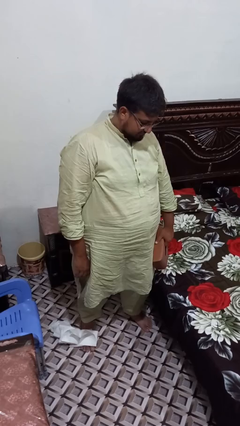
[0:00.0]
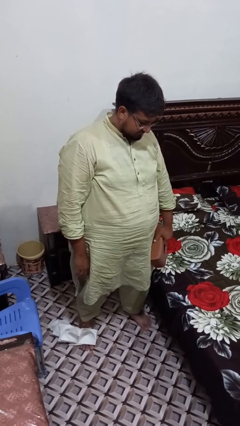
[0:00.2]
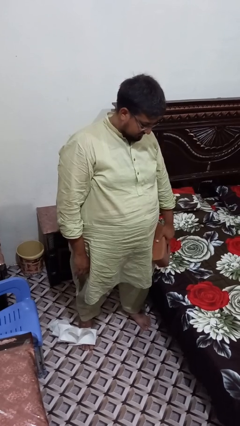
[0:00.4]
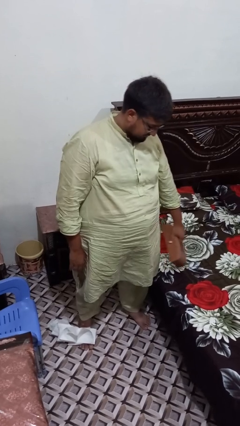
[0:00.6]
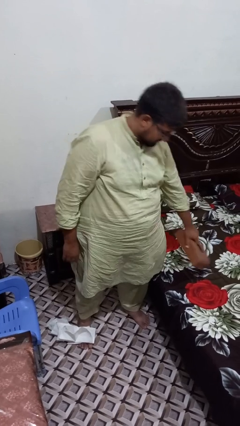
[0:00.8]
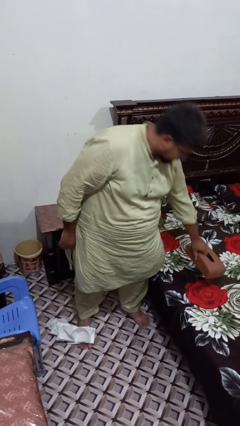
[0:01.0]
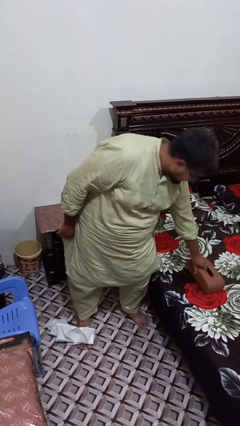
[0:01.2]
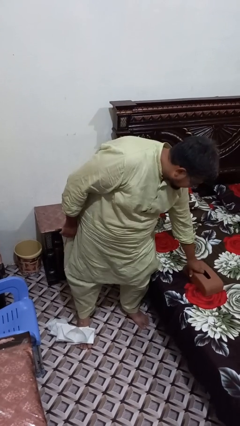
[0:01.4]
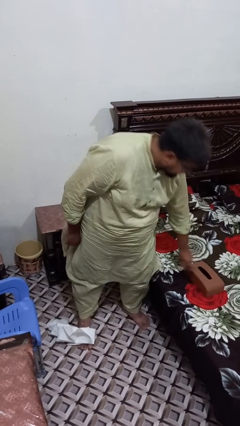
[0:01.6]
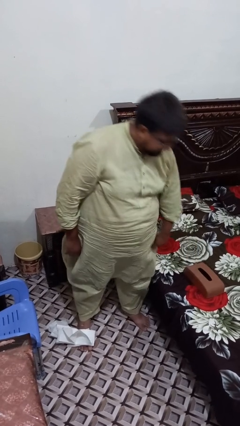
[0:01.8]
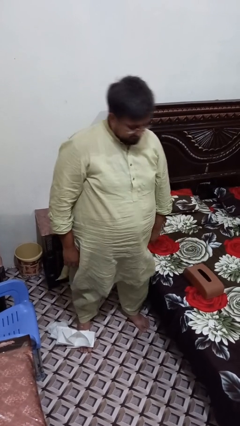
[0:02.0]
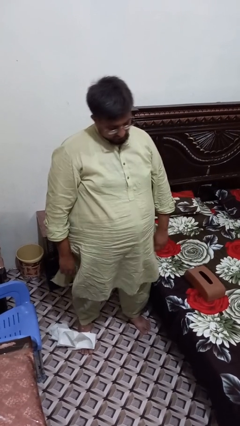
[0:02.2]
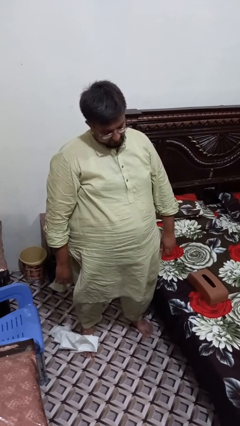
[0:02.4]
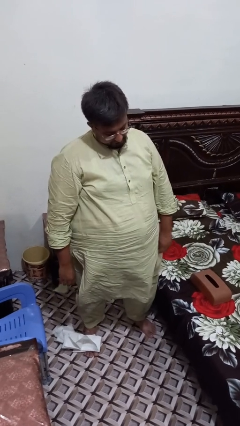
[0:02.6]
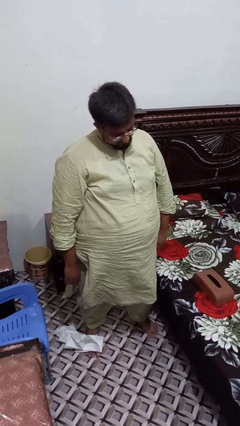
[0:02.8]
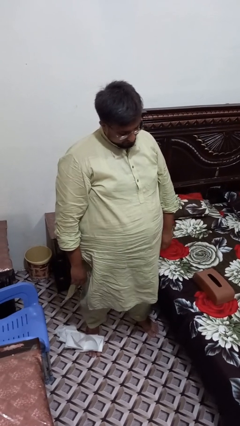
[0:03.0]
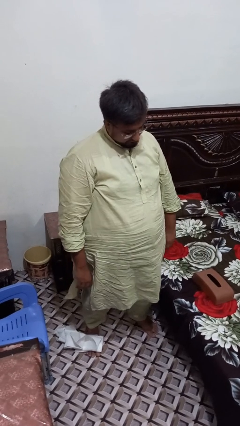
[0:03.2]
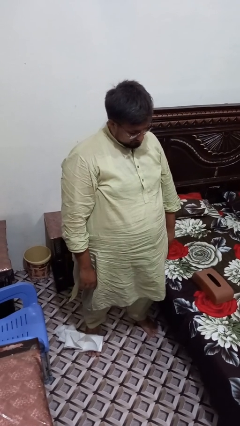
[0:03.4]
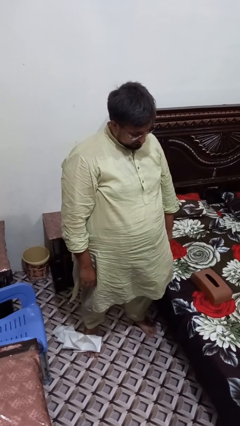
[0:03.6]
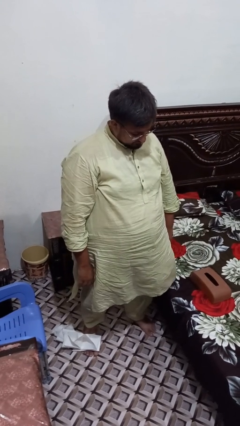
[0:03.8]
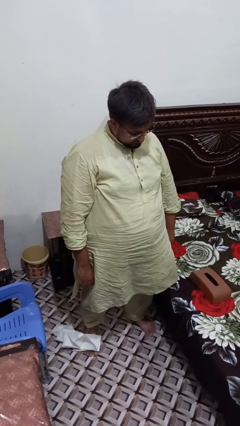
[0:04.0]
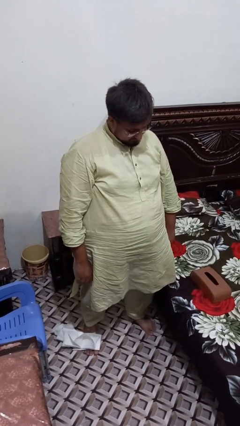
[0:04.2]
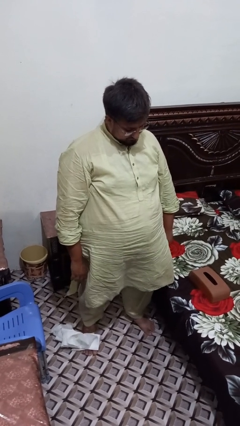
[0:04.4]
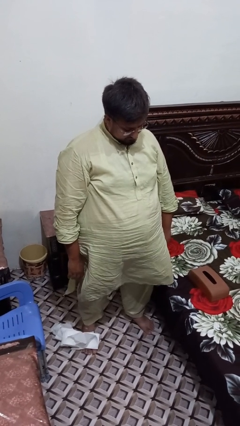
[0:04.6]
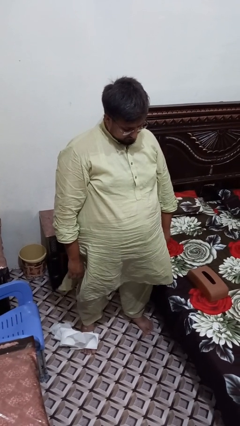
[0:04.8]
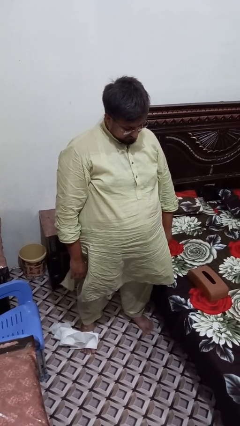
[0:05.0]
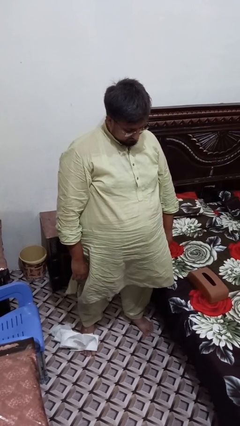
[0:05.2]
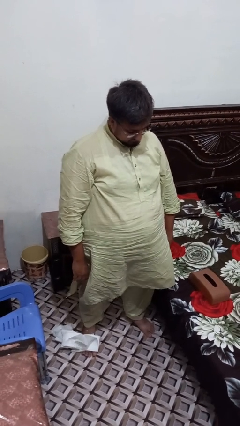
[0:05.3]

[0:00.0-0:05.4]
person puts down object on bed

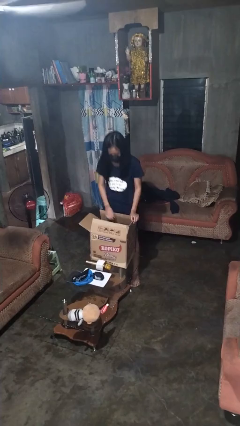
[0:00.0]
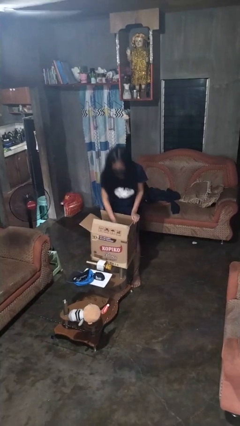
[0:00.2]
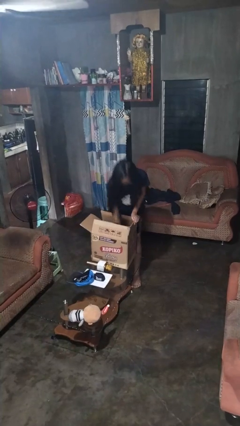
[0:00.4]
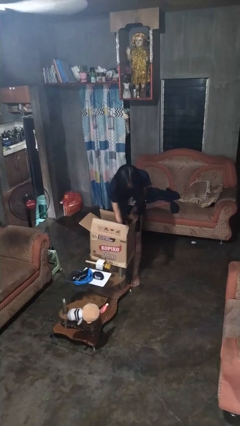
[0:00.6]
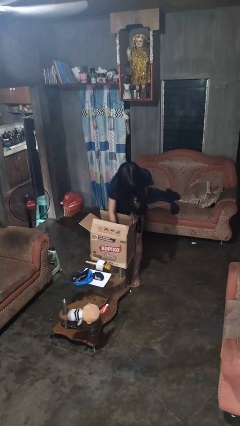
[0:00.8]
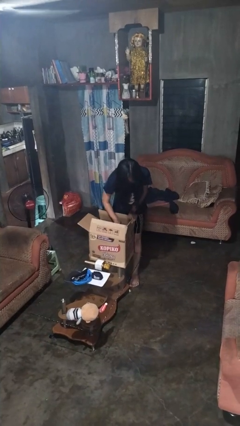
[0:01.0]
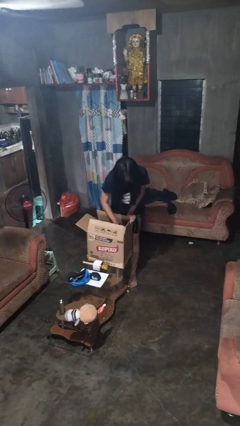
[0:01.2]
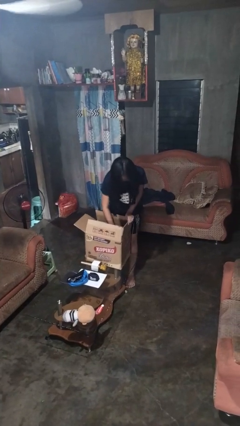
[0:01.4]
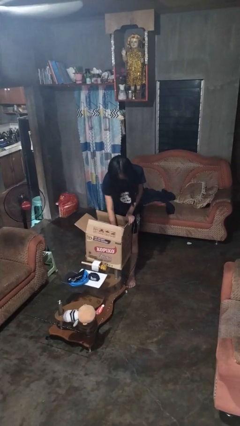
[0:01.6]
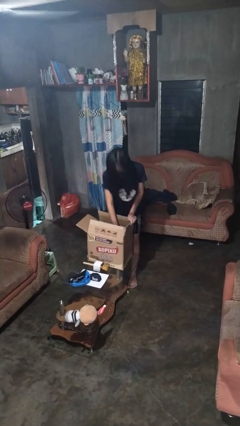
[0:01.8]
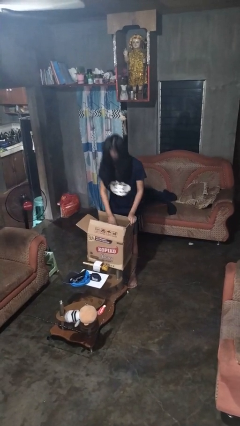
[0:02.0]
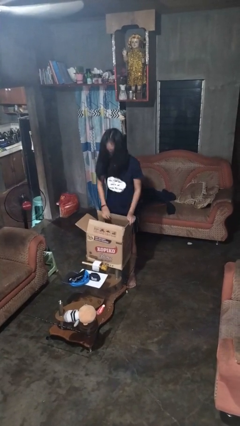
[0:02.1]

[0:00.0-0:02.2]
person searches in box

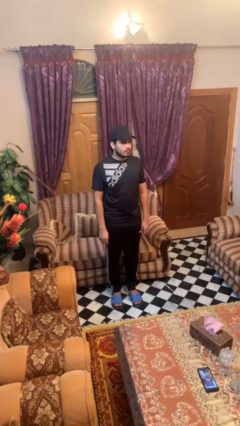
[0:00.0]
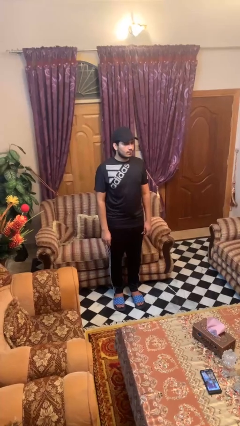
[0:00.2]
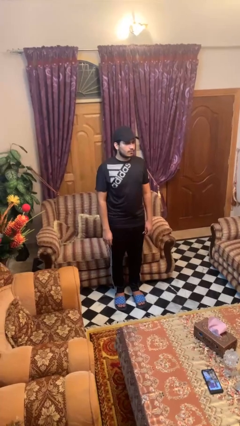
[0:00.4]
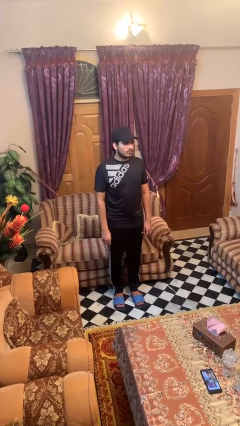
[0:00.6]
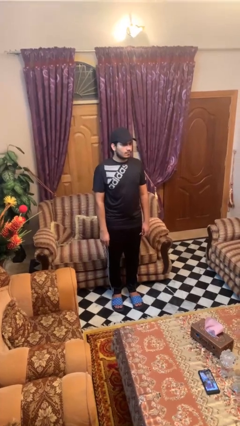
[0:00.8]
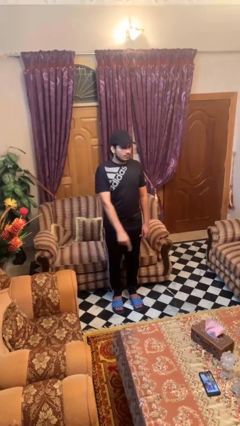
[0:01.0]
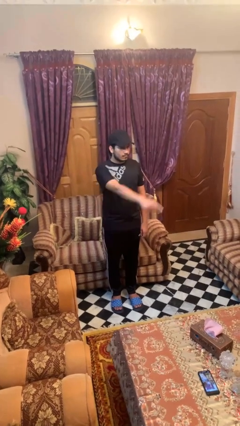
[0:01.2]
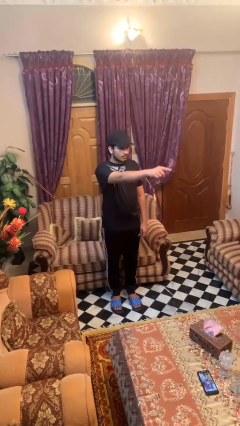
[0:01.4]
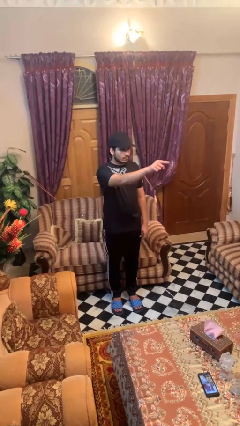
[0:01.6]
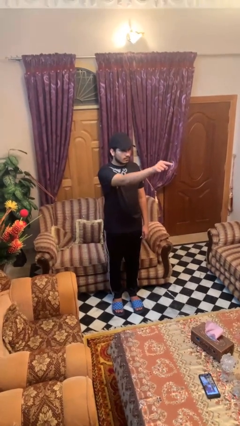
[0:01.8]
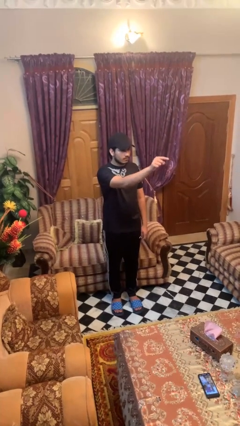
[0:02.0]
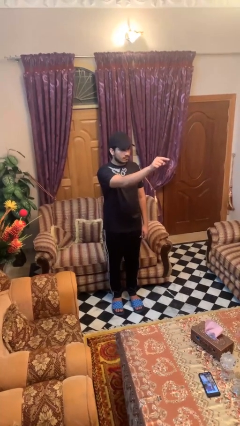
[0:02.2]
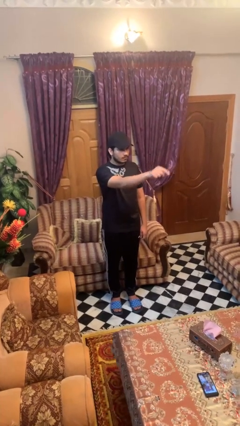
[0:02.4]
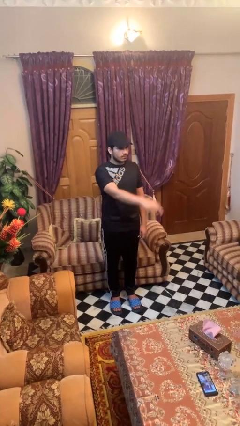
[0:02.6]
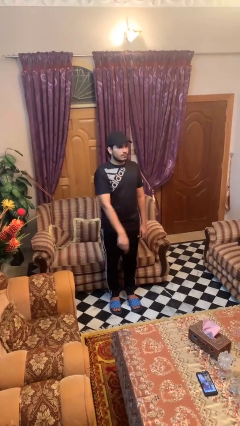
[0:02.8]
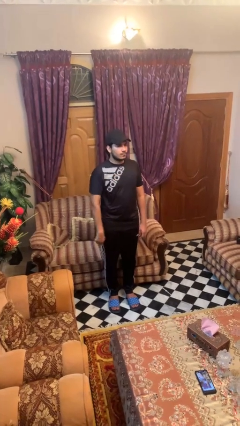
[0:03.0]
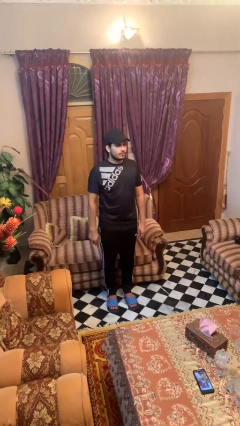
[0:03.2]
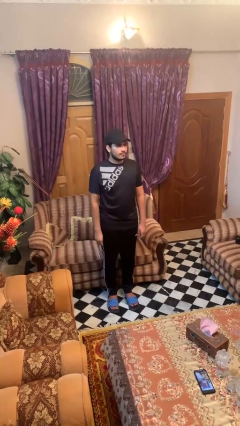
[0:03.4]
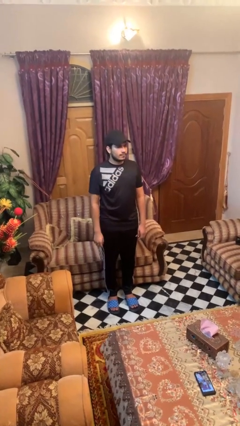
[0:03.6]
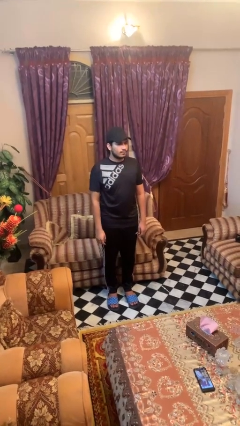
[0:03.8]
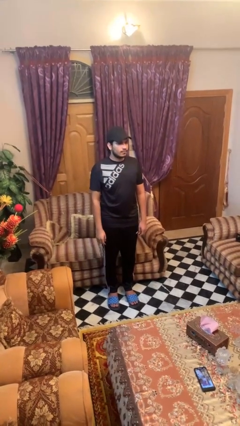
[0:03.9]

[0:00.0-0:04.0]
person points at person

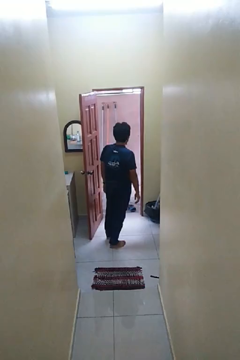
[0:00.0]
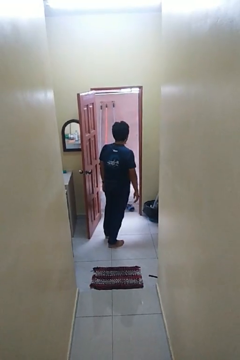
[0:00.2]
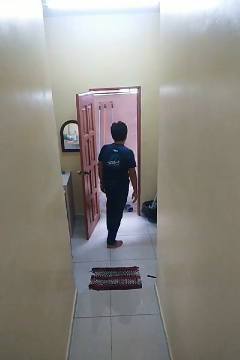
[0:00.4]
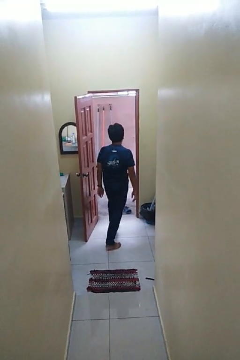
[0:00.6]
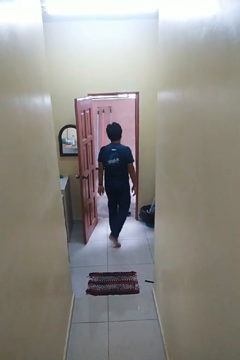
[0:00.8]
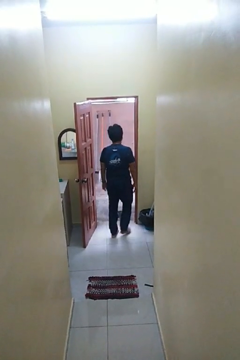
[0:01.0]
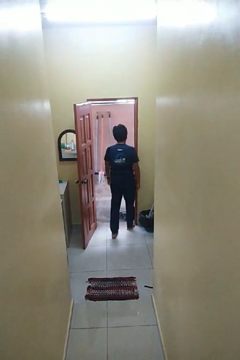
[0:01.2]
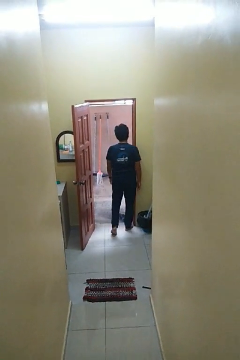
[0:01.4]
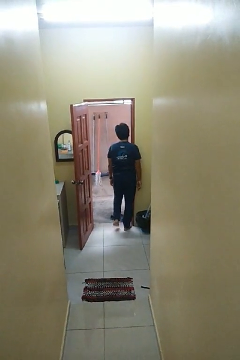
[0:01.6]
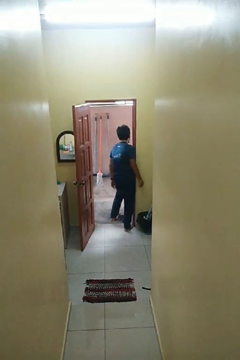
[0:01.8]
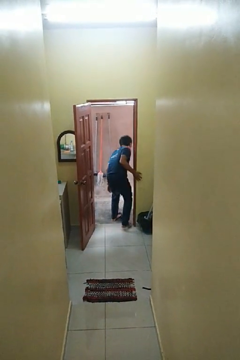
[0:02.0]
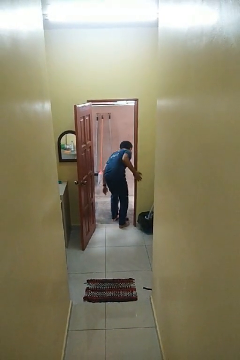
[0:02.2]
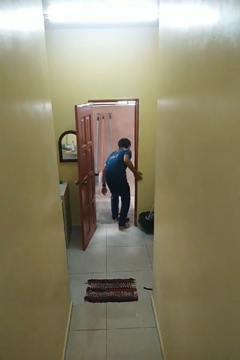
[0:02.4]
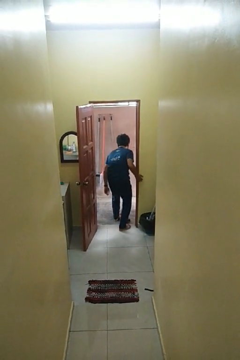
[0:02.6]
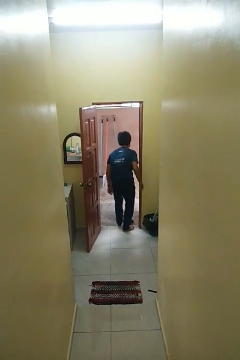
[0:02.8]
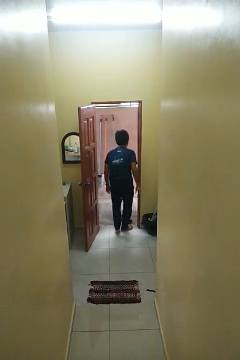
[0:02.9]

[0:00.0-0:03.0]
person bumps into wall

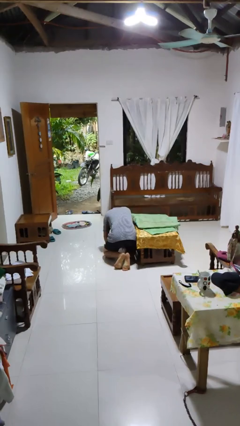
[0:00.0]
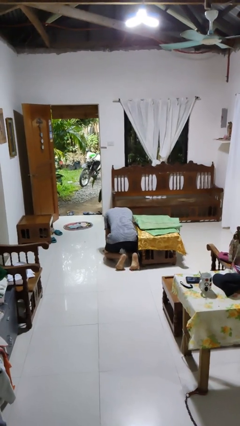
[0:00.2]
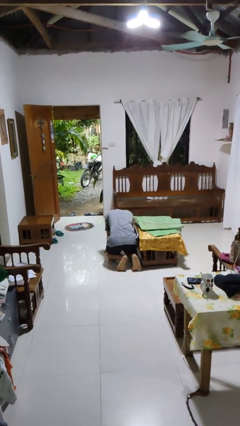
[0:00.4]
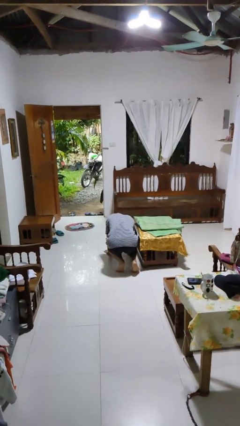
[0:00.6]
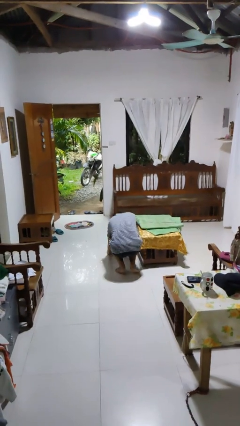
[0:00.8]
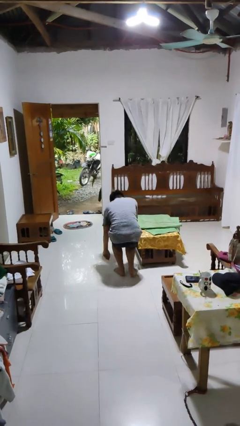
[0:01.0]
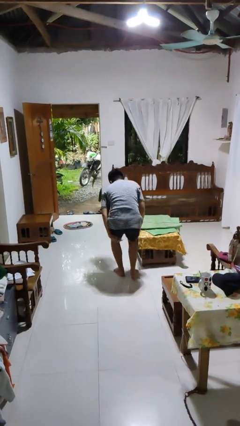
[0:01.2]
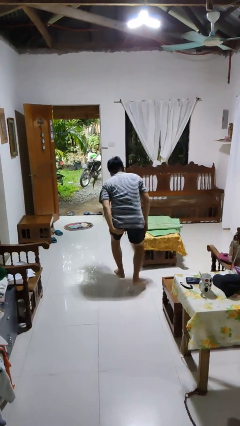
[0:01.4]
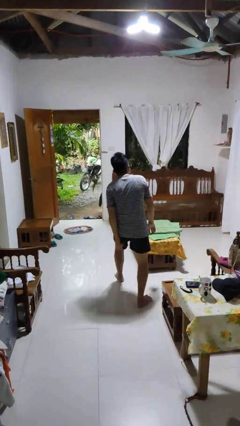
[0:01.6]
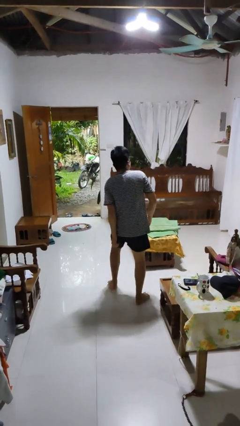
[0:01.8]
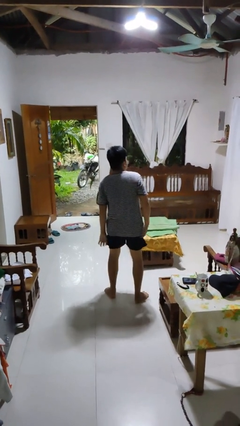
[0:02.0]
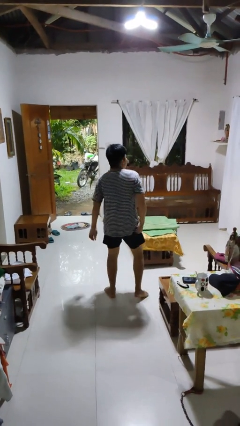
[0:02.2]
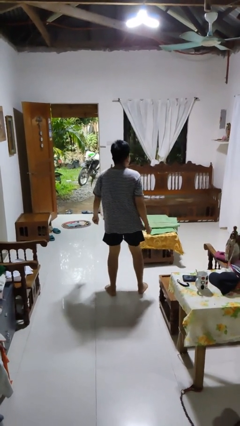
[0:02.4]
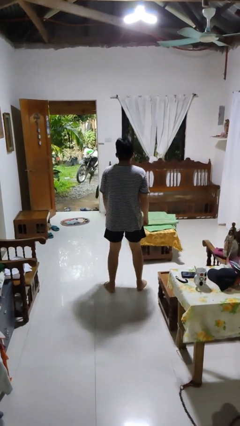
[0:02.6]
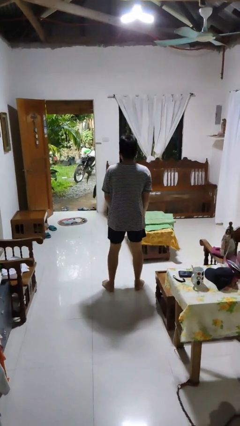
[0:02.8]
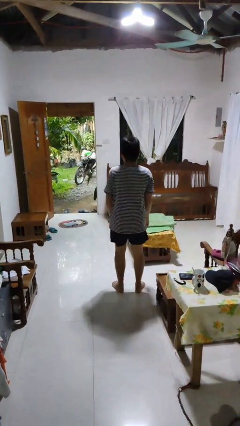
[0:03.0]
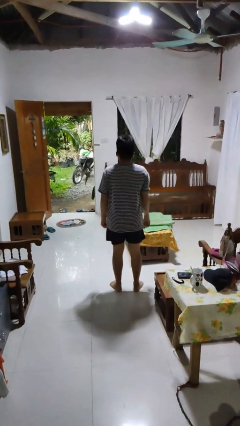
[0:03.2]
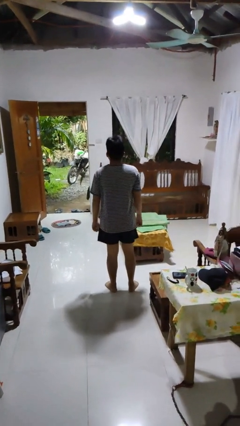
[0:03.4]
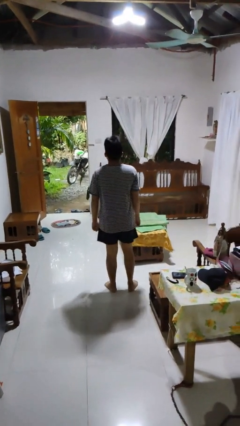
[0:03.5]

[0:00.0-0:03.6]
person stands up from floor
